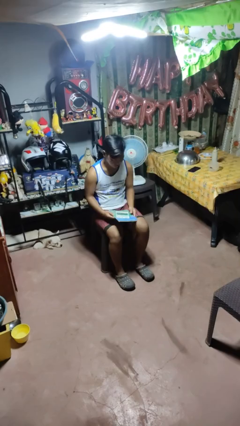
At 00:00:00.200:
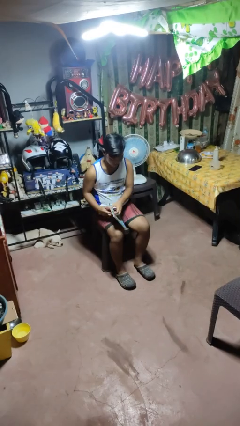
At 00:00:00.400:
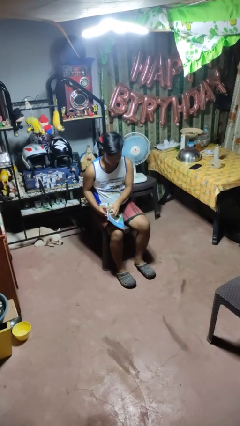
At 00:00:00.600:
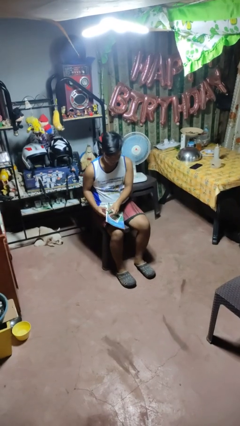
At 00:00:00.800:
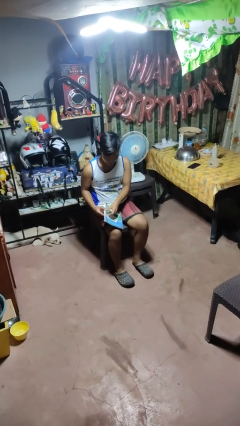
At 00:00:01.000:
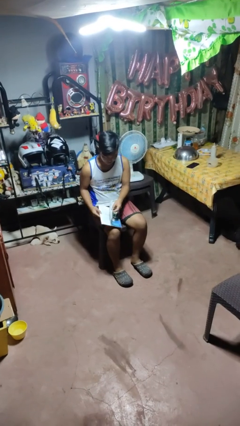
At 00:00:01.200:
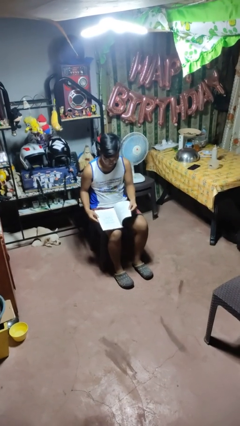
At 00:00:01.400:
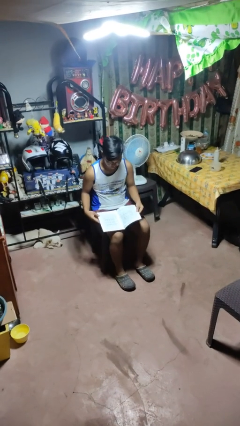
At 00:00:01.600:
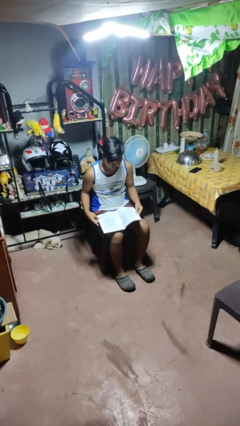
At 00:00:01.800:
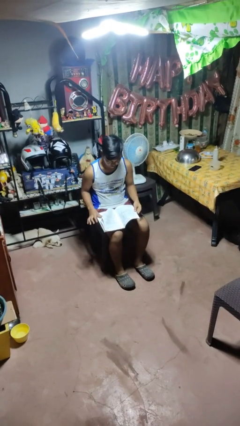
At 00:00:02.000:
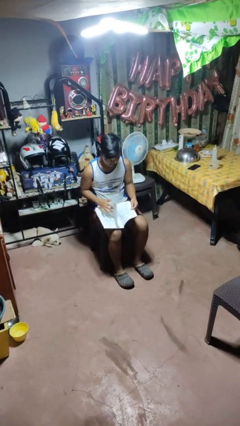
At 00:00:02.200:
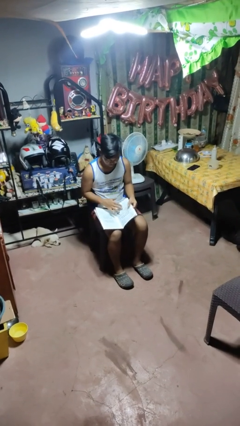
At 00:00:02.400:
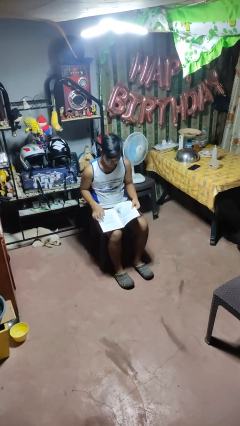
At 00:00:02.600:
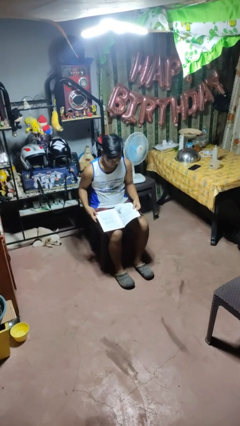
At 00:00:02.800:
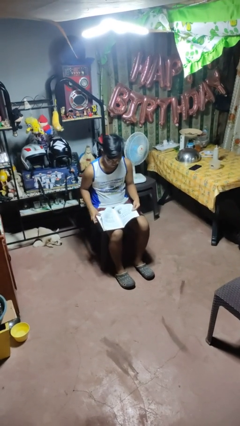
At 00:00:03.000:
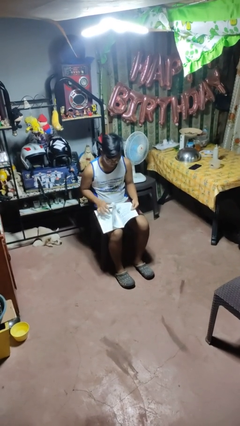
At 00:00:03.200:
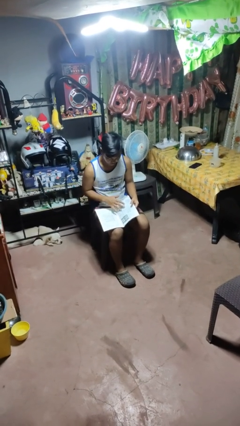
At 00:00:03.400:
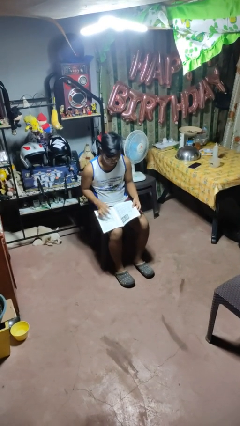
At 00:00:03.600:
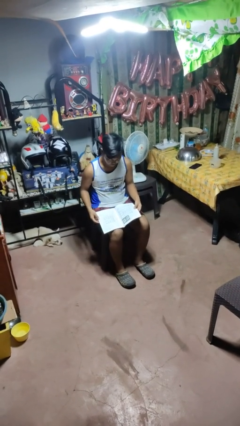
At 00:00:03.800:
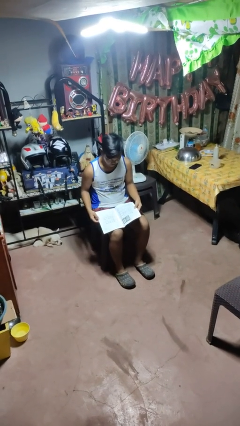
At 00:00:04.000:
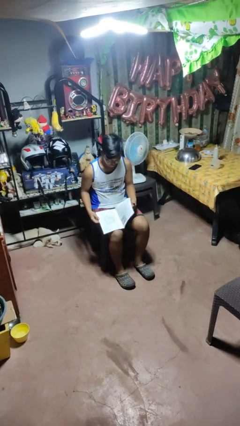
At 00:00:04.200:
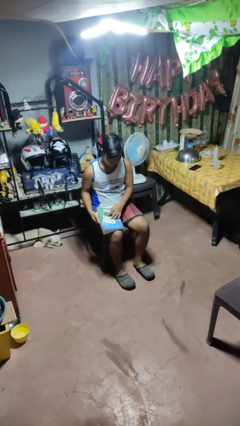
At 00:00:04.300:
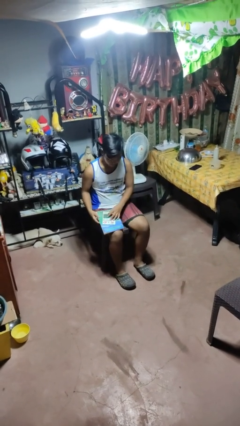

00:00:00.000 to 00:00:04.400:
person reads magazine

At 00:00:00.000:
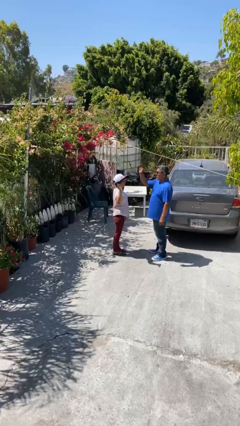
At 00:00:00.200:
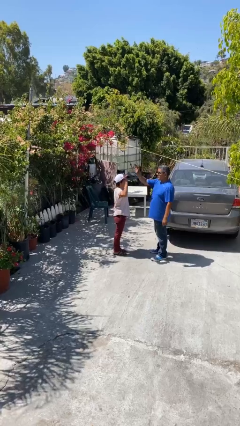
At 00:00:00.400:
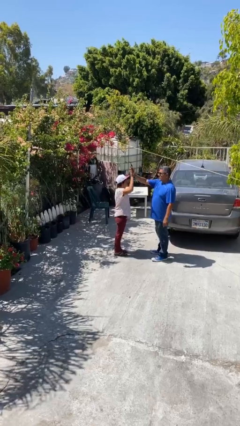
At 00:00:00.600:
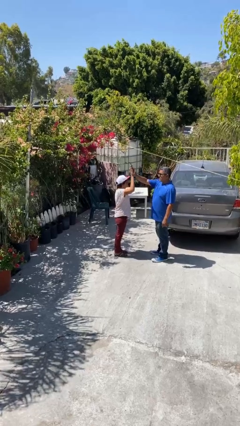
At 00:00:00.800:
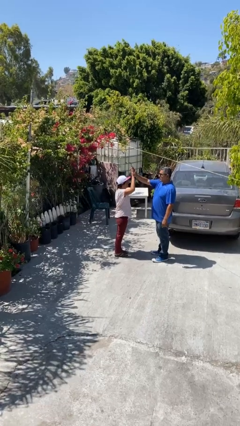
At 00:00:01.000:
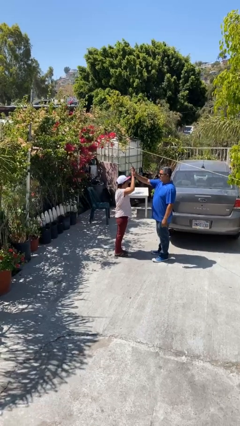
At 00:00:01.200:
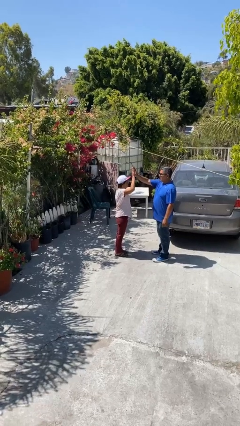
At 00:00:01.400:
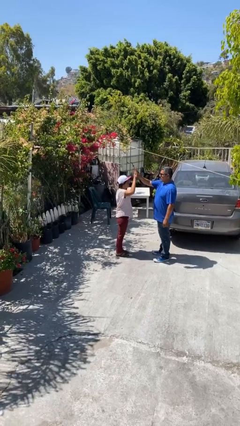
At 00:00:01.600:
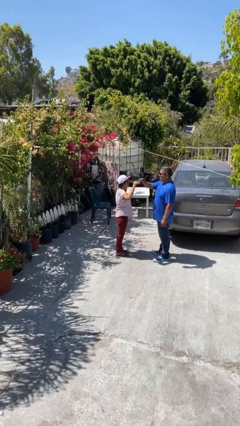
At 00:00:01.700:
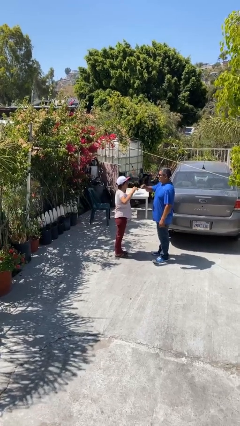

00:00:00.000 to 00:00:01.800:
person highfives hand

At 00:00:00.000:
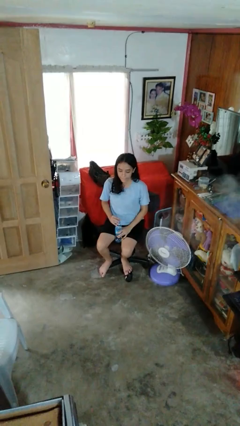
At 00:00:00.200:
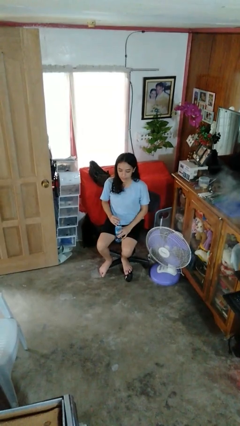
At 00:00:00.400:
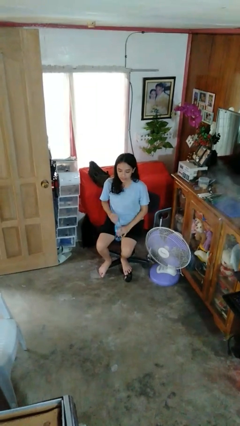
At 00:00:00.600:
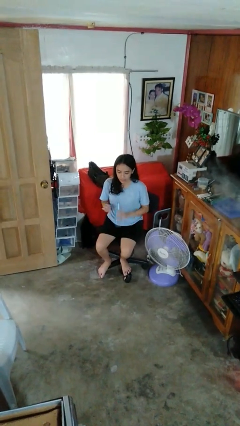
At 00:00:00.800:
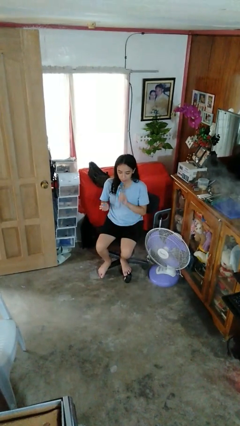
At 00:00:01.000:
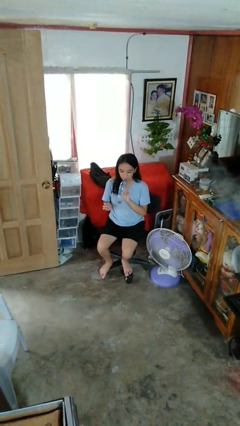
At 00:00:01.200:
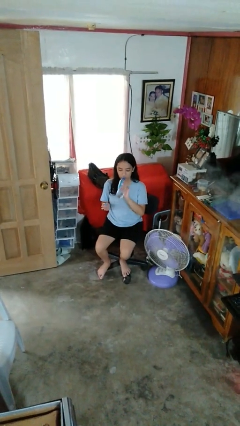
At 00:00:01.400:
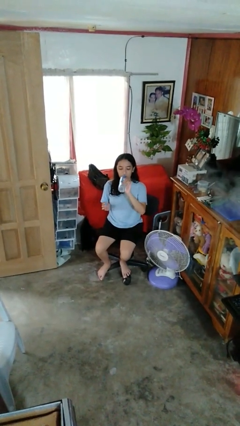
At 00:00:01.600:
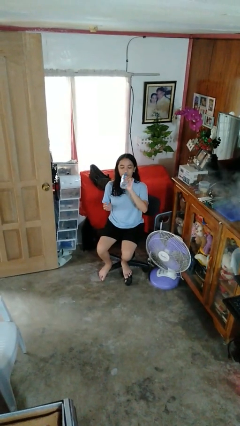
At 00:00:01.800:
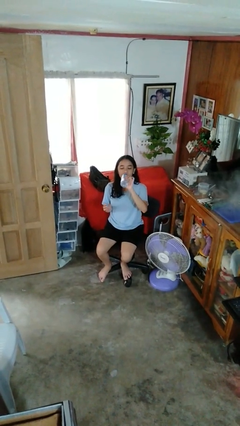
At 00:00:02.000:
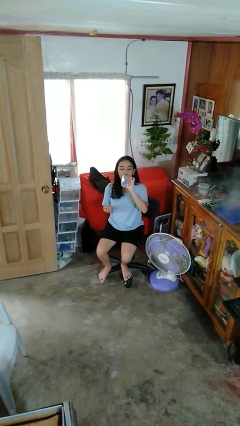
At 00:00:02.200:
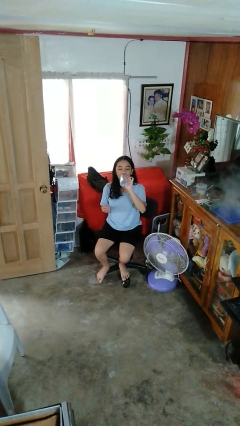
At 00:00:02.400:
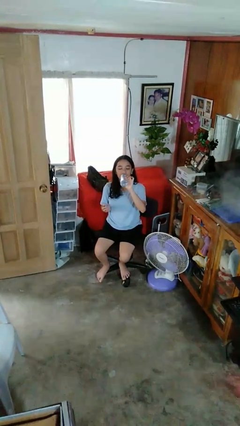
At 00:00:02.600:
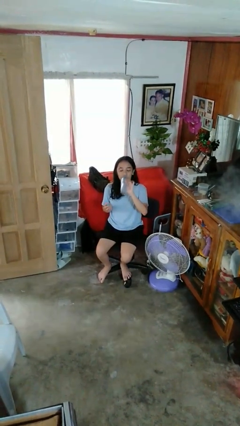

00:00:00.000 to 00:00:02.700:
person drinks from bottle

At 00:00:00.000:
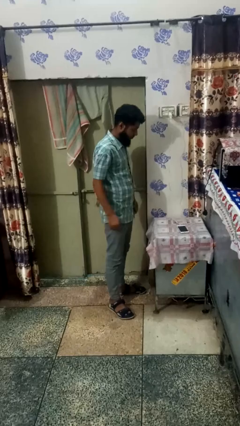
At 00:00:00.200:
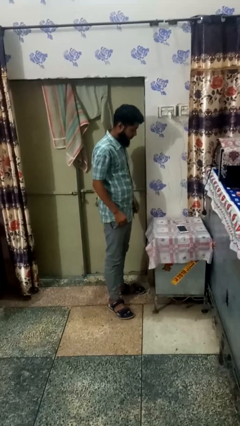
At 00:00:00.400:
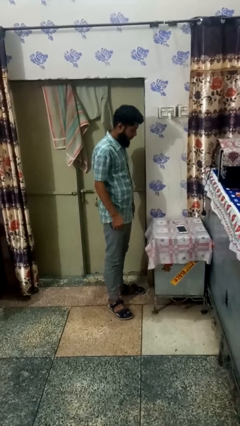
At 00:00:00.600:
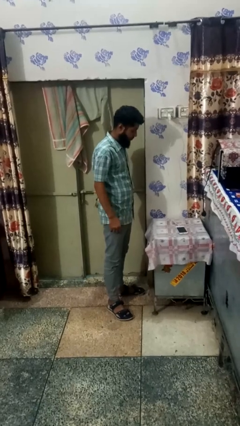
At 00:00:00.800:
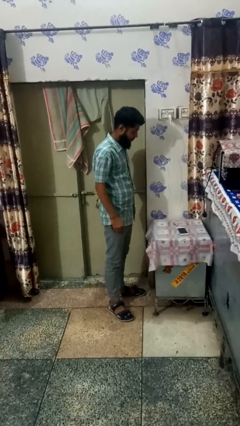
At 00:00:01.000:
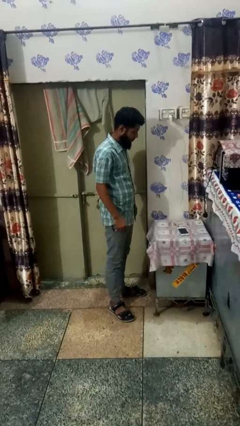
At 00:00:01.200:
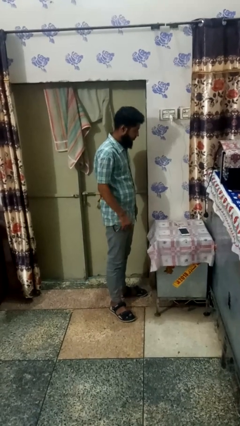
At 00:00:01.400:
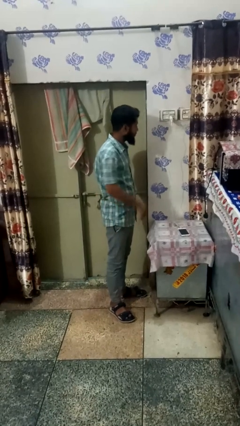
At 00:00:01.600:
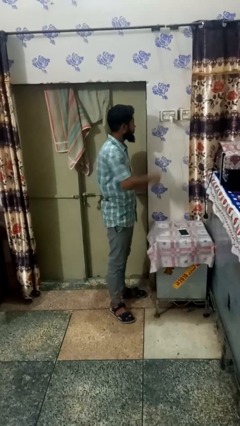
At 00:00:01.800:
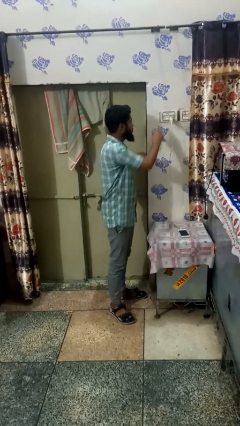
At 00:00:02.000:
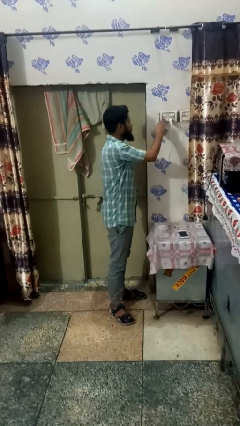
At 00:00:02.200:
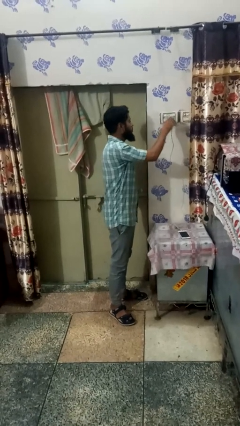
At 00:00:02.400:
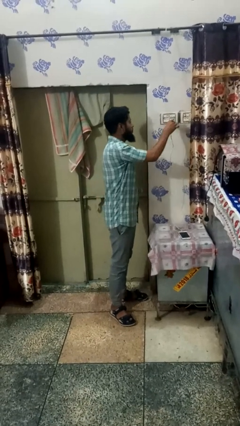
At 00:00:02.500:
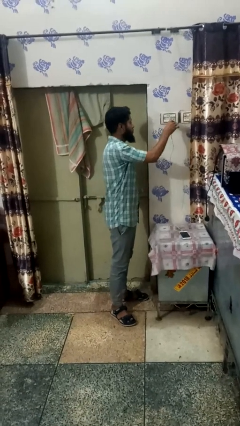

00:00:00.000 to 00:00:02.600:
person unplugs from electrical socket

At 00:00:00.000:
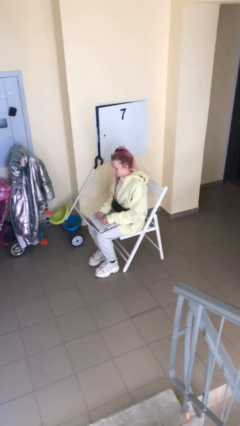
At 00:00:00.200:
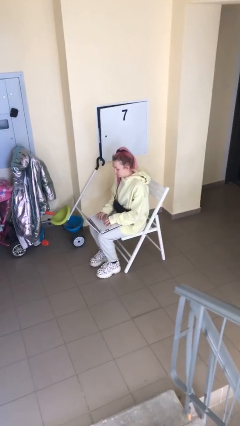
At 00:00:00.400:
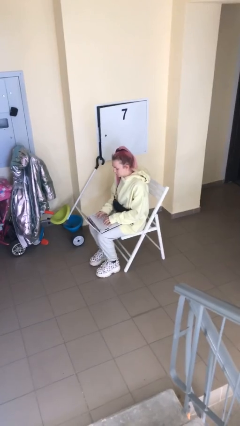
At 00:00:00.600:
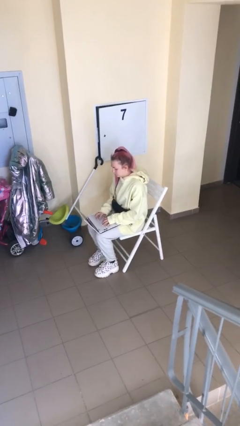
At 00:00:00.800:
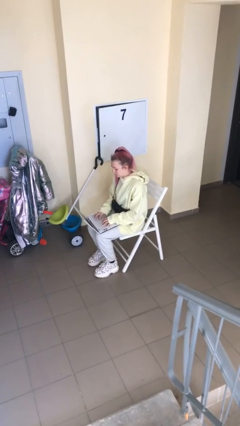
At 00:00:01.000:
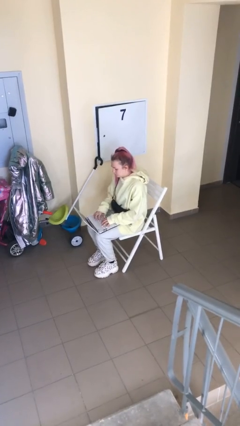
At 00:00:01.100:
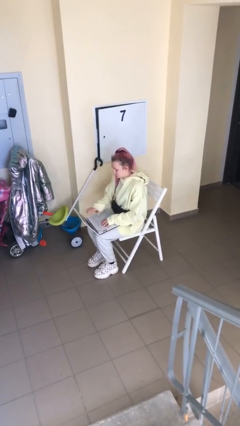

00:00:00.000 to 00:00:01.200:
person interacts with laptop

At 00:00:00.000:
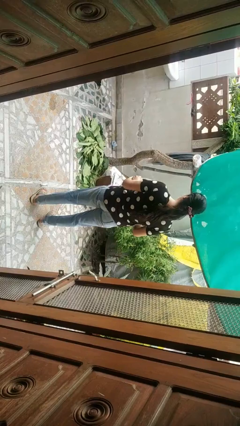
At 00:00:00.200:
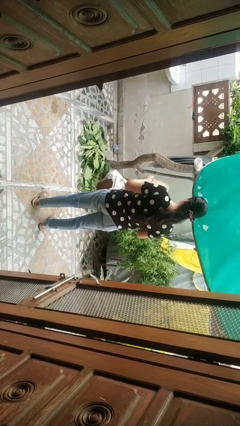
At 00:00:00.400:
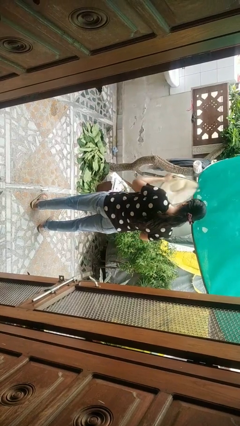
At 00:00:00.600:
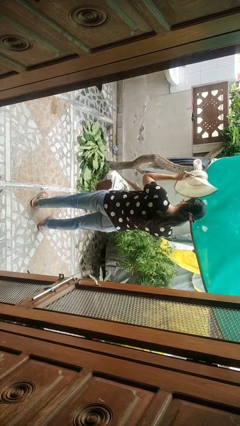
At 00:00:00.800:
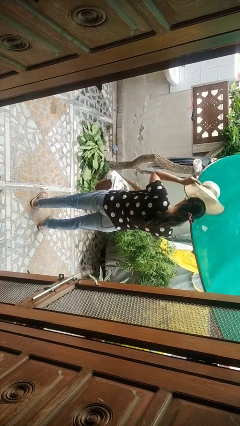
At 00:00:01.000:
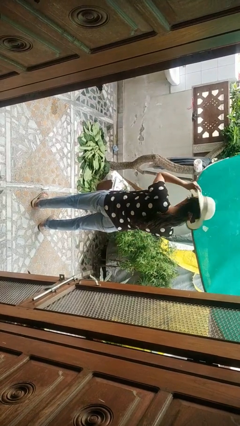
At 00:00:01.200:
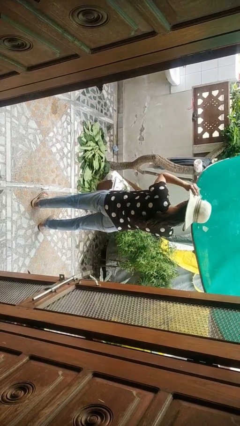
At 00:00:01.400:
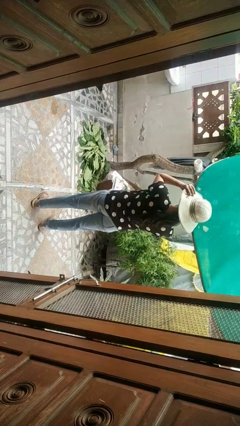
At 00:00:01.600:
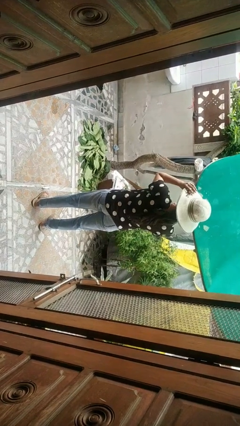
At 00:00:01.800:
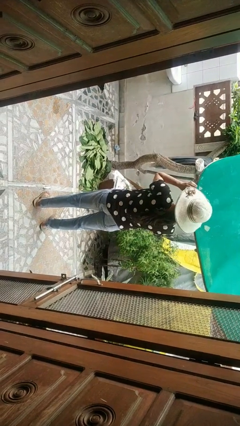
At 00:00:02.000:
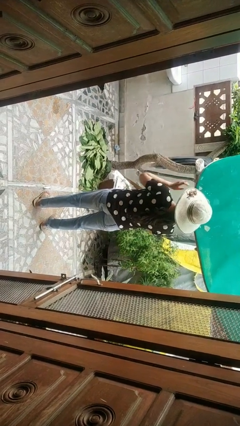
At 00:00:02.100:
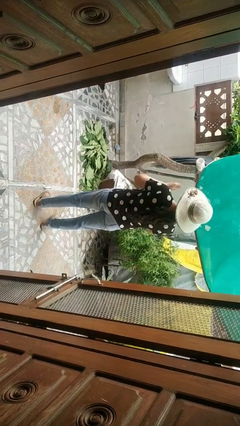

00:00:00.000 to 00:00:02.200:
person puts on hat

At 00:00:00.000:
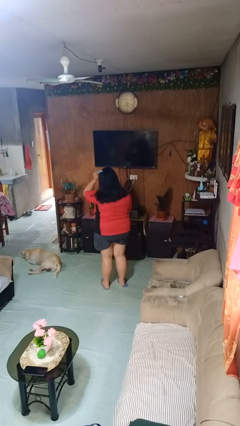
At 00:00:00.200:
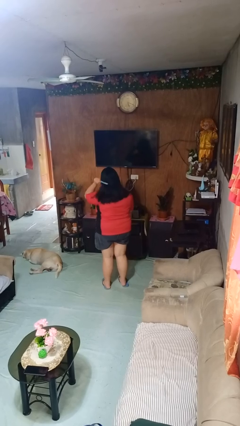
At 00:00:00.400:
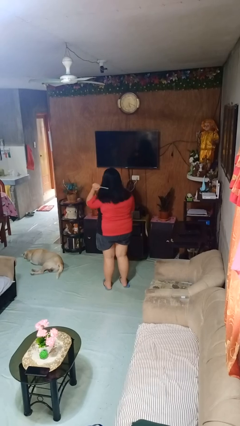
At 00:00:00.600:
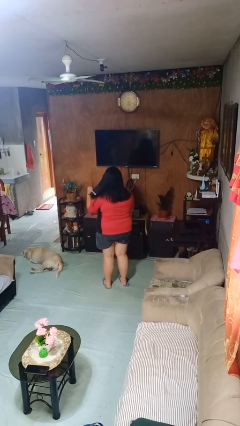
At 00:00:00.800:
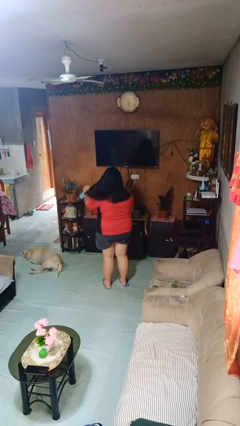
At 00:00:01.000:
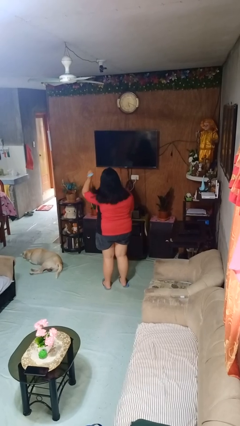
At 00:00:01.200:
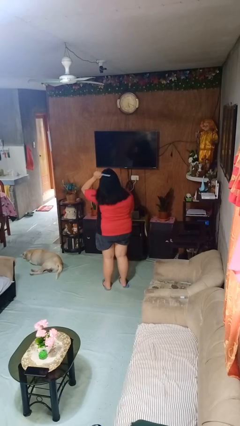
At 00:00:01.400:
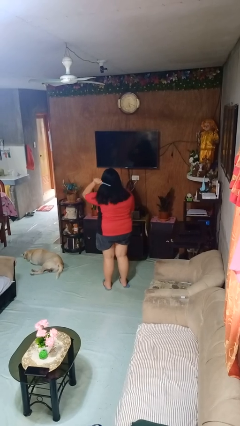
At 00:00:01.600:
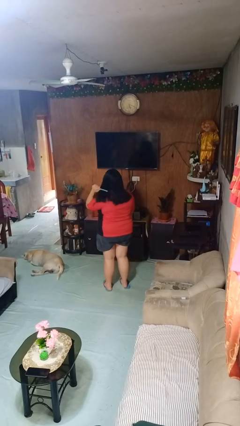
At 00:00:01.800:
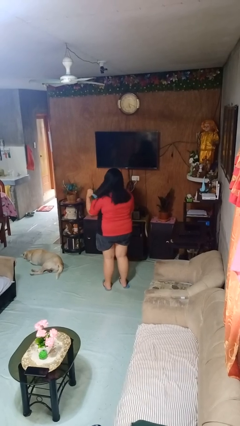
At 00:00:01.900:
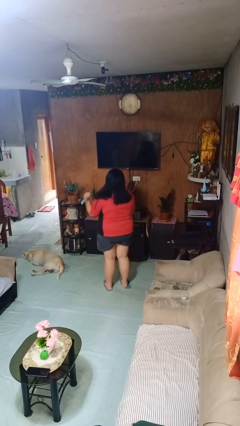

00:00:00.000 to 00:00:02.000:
person brushes hair
